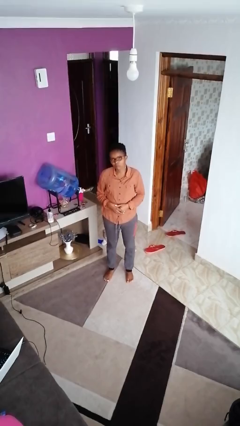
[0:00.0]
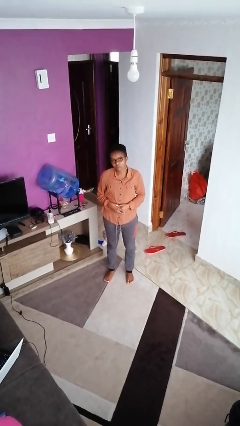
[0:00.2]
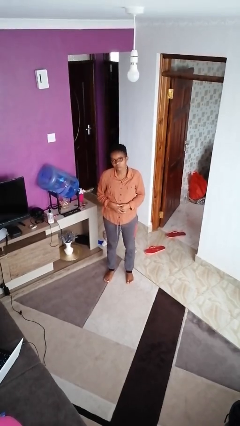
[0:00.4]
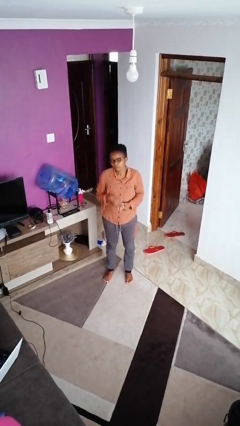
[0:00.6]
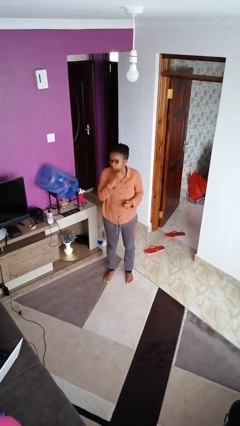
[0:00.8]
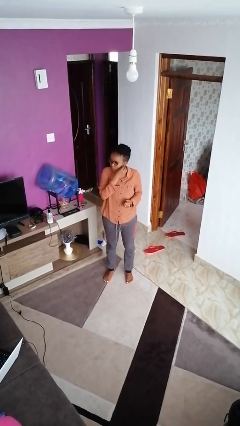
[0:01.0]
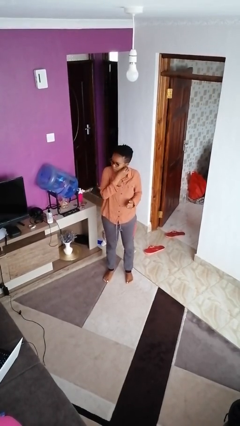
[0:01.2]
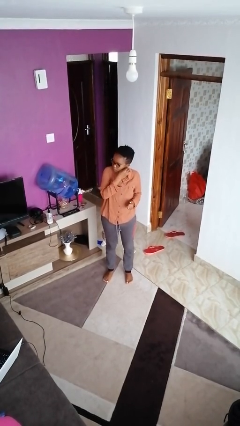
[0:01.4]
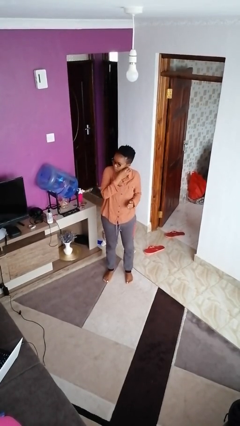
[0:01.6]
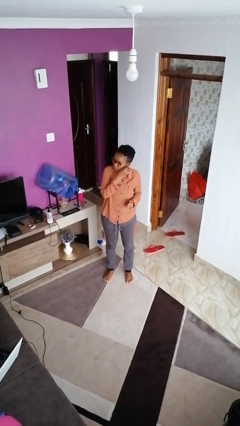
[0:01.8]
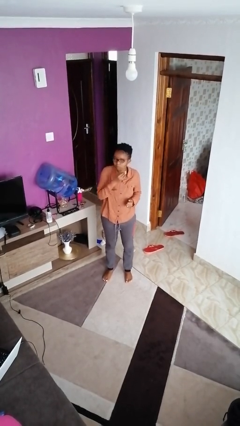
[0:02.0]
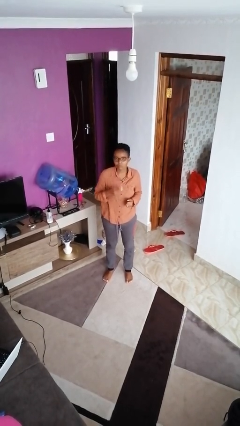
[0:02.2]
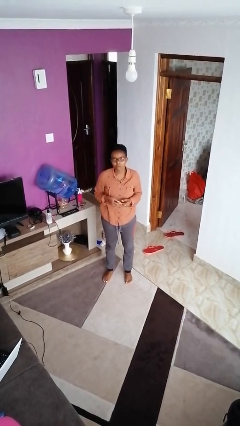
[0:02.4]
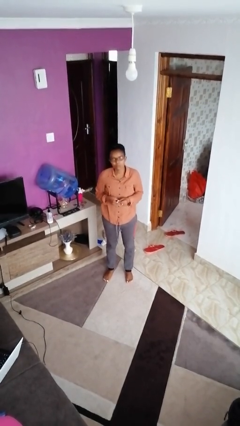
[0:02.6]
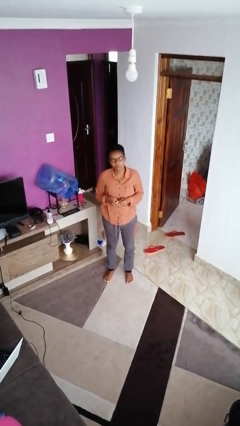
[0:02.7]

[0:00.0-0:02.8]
person takes off earrings

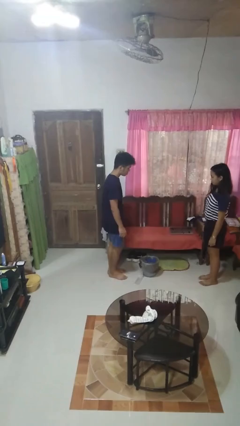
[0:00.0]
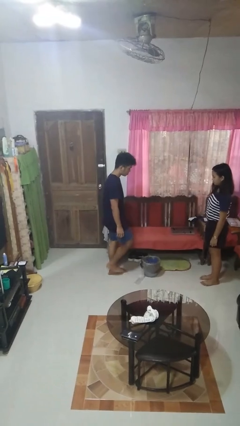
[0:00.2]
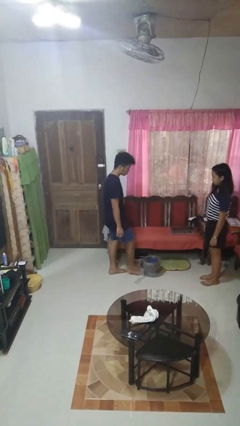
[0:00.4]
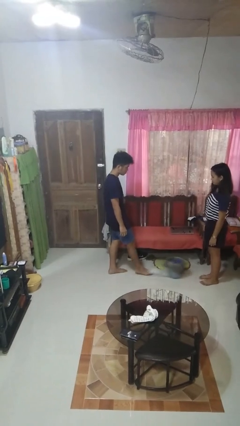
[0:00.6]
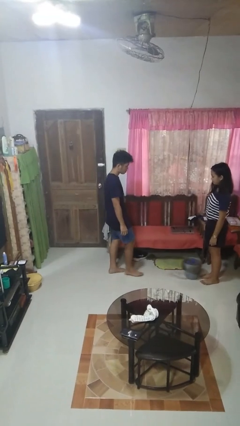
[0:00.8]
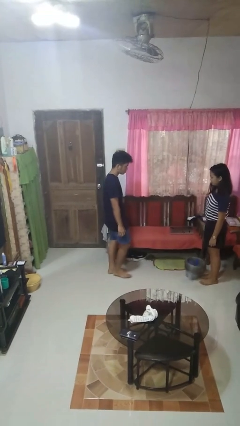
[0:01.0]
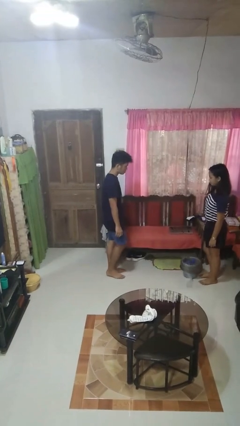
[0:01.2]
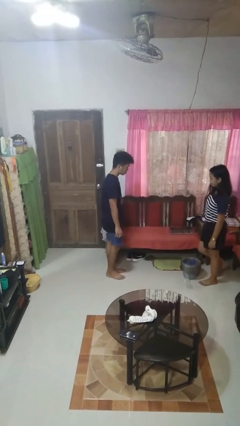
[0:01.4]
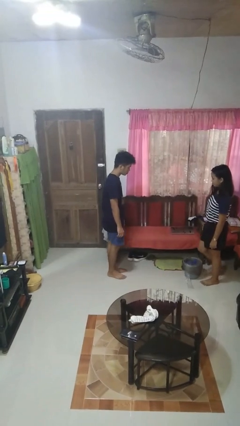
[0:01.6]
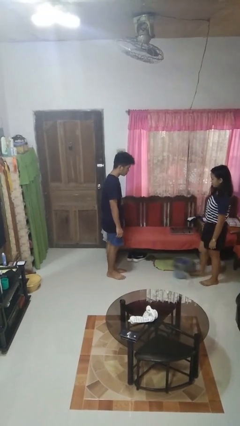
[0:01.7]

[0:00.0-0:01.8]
person kicks object to person

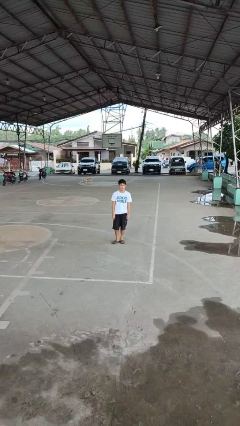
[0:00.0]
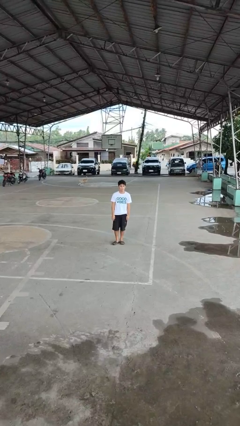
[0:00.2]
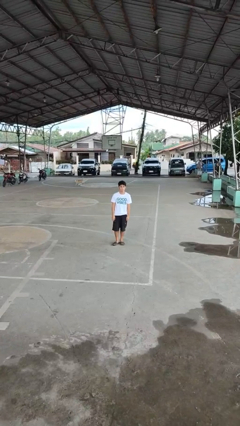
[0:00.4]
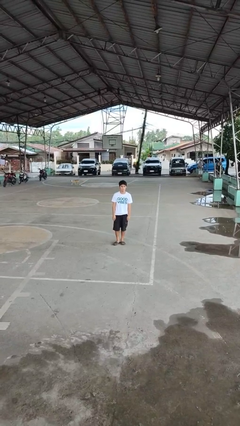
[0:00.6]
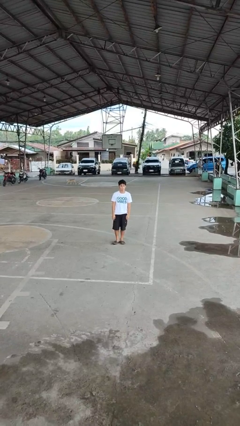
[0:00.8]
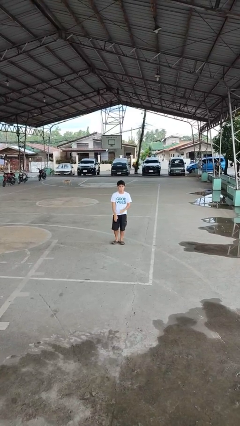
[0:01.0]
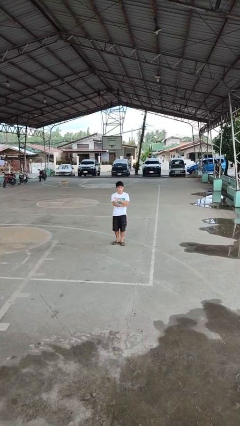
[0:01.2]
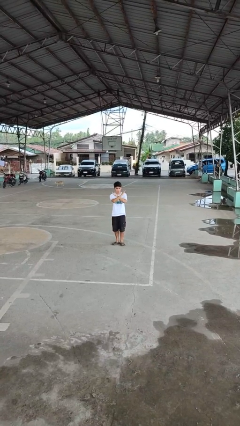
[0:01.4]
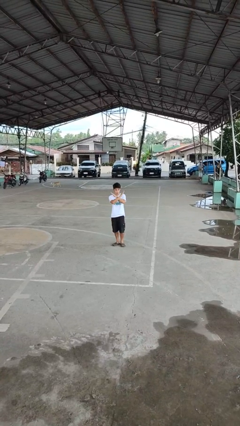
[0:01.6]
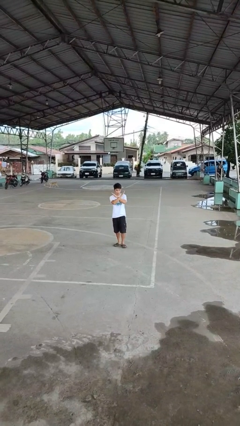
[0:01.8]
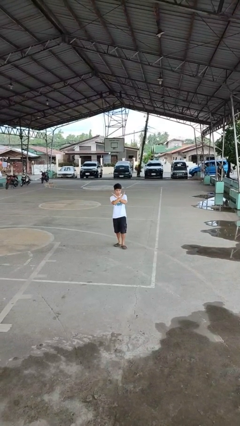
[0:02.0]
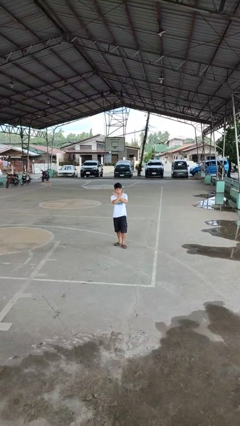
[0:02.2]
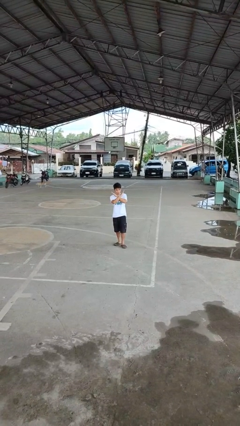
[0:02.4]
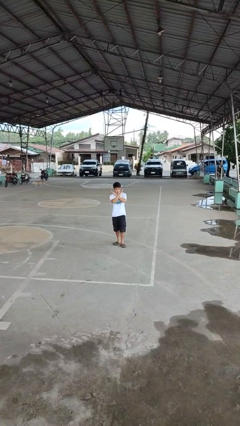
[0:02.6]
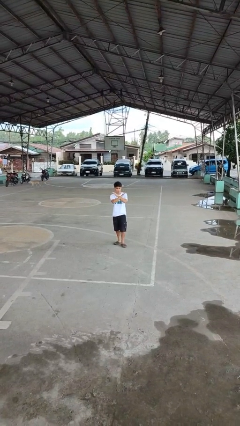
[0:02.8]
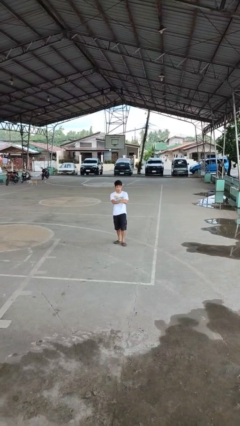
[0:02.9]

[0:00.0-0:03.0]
person gestures arms x

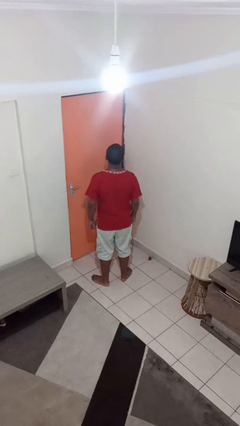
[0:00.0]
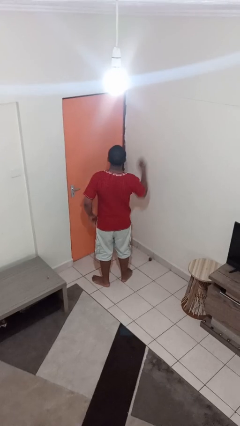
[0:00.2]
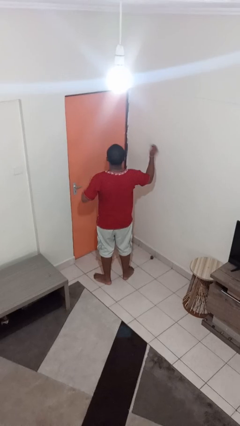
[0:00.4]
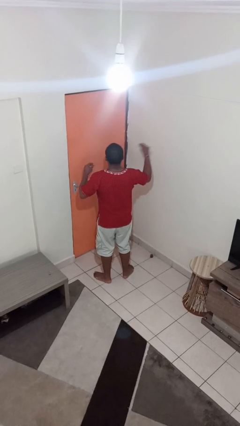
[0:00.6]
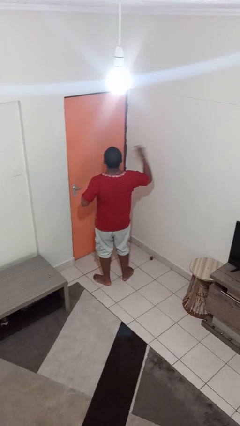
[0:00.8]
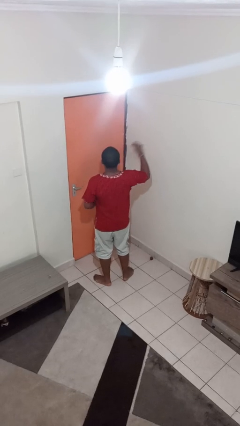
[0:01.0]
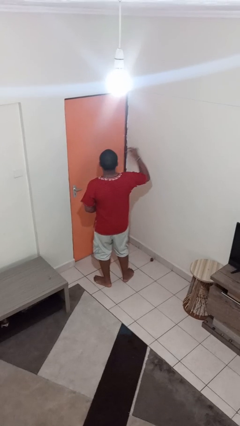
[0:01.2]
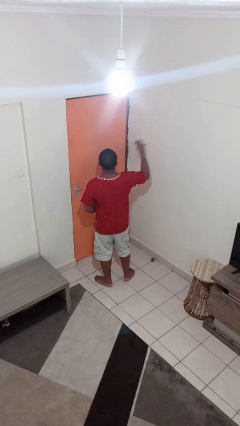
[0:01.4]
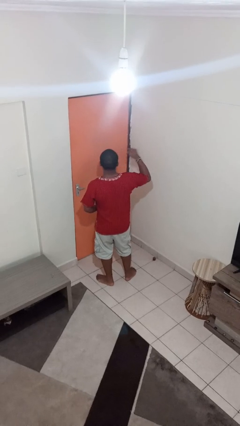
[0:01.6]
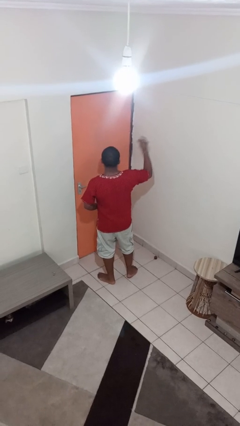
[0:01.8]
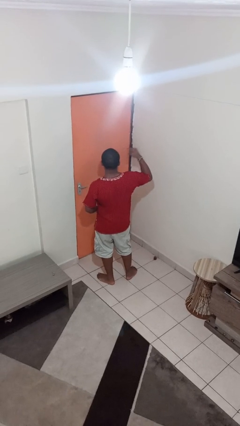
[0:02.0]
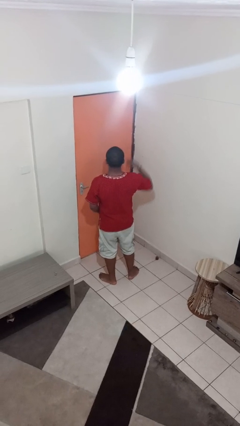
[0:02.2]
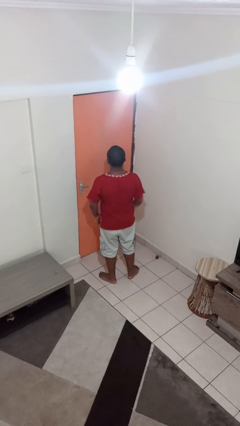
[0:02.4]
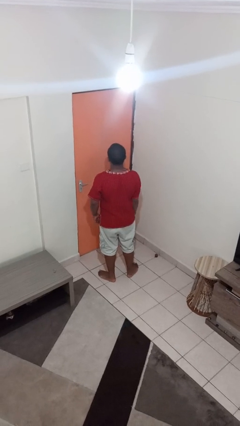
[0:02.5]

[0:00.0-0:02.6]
person snaps fingers

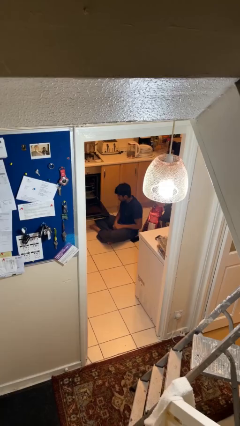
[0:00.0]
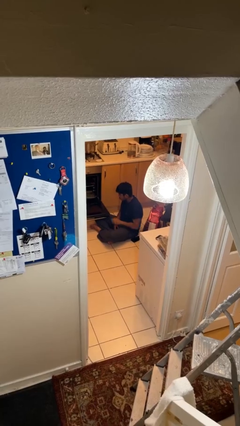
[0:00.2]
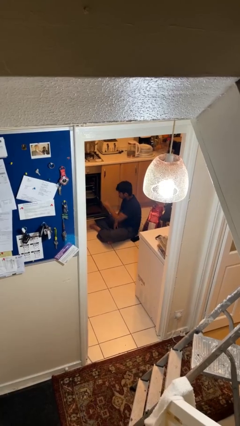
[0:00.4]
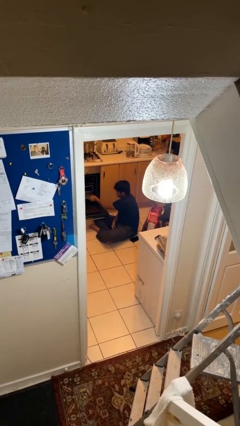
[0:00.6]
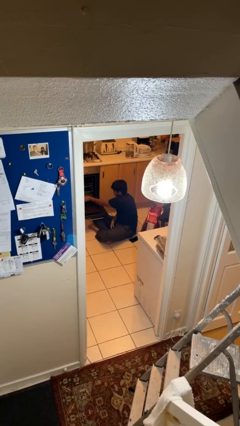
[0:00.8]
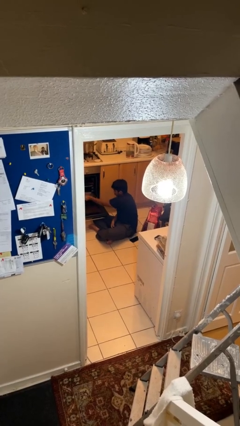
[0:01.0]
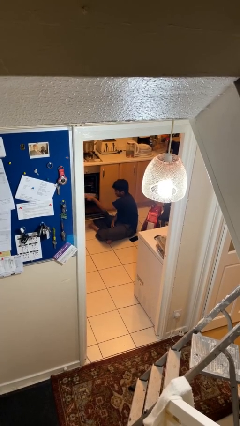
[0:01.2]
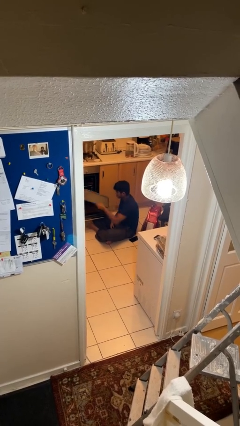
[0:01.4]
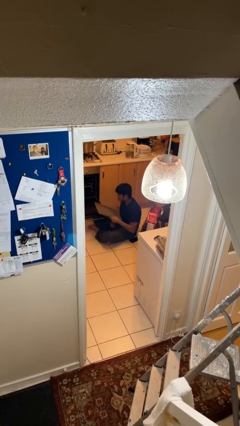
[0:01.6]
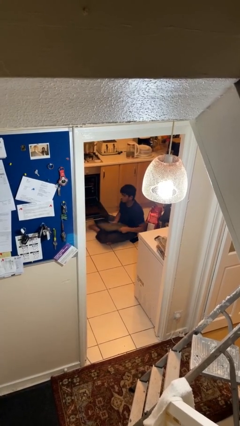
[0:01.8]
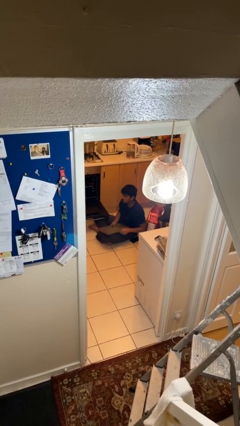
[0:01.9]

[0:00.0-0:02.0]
person takes object from oven

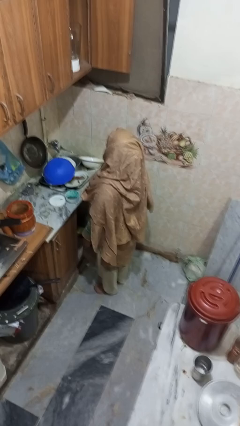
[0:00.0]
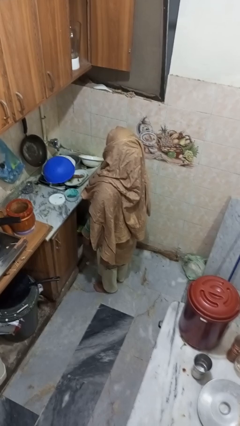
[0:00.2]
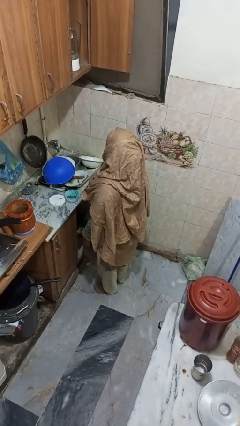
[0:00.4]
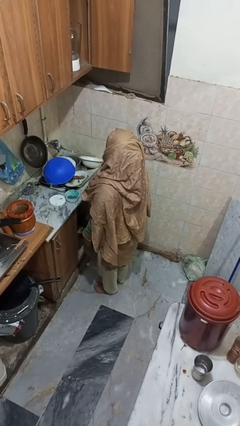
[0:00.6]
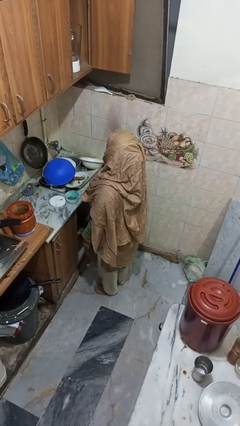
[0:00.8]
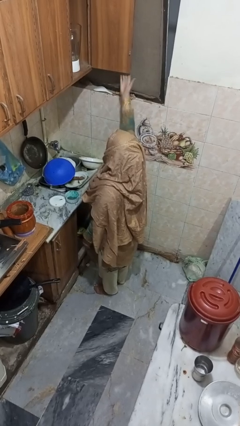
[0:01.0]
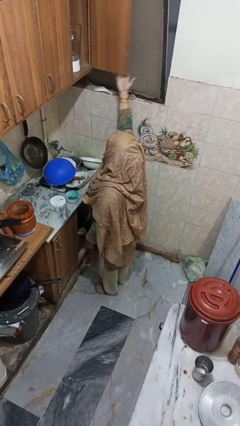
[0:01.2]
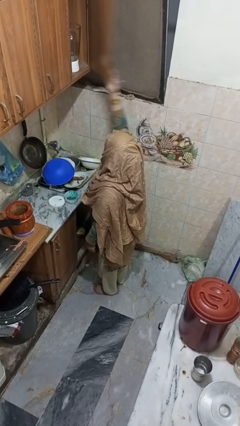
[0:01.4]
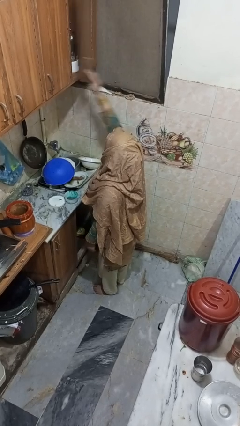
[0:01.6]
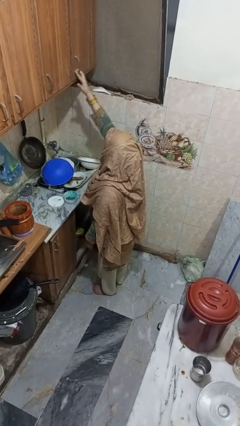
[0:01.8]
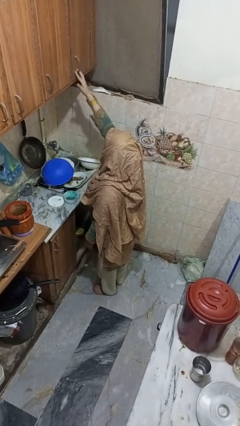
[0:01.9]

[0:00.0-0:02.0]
person closes cabinet

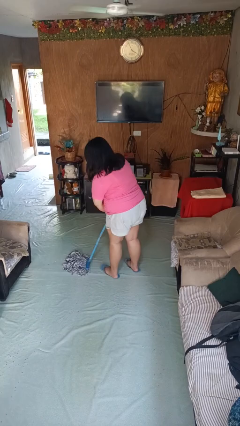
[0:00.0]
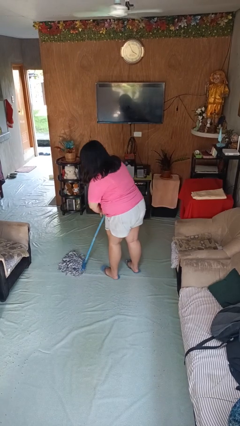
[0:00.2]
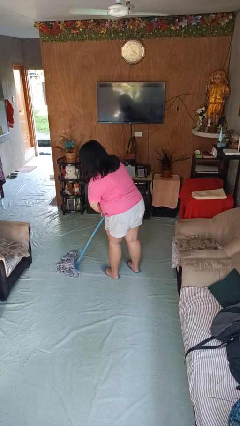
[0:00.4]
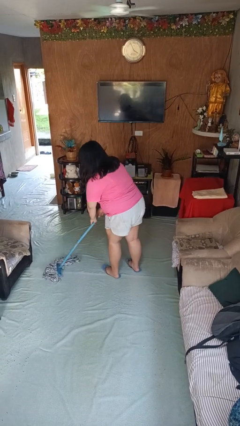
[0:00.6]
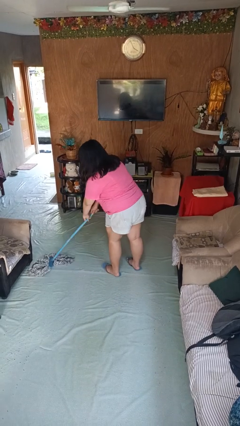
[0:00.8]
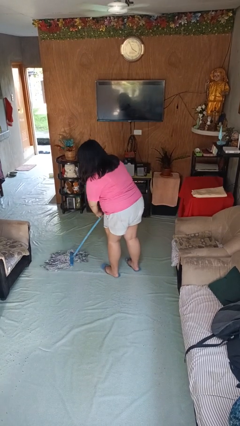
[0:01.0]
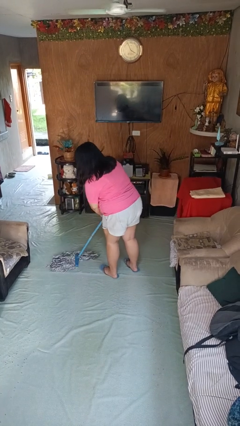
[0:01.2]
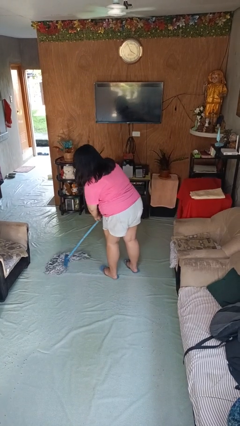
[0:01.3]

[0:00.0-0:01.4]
person mops

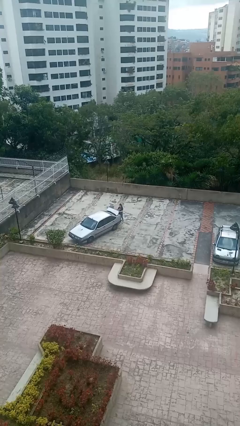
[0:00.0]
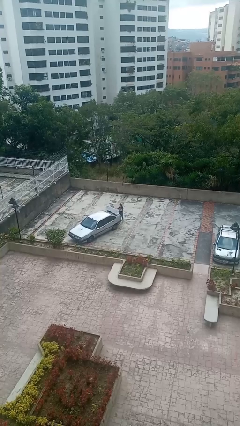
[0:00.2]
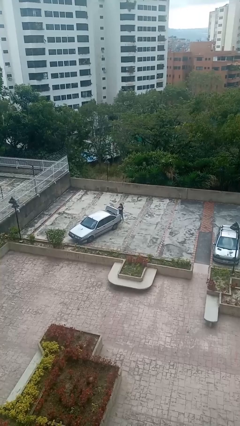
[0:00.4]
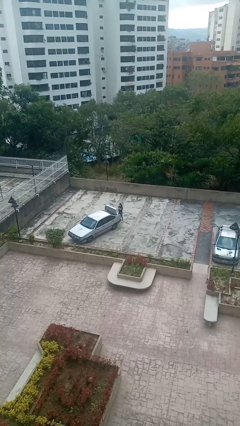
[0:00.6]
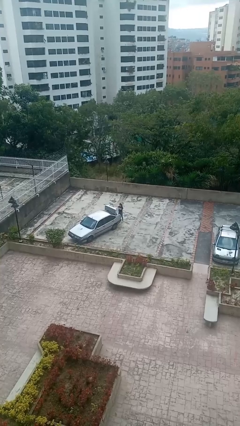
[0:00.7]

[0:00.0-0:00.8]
person opens car trunk

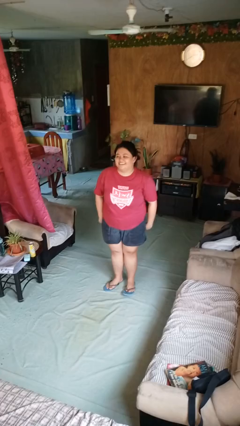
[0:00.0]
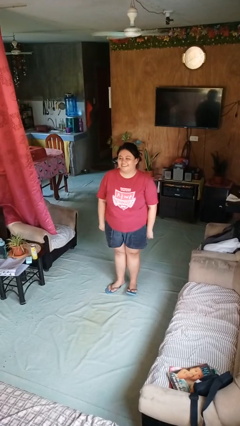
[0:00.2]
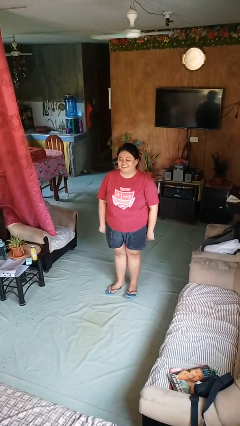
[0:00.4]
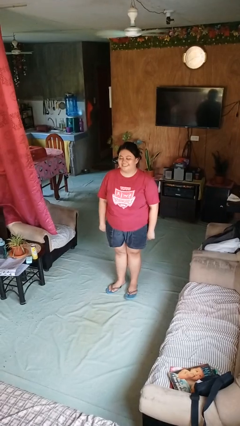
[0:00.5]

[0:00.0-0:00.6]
person stands up
